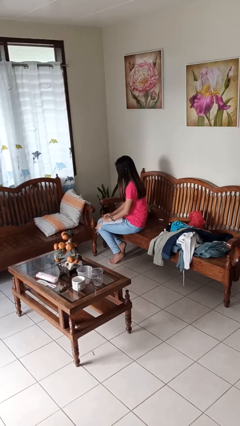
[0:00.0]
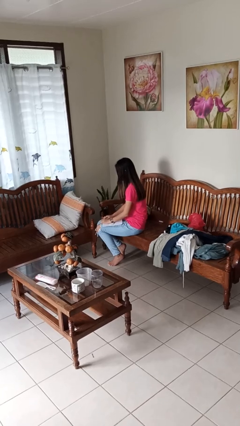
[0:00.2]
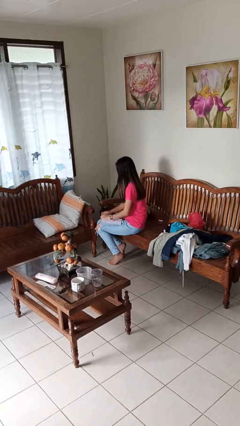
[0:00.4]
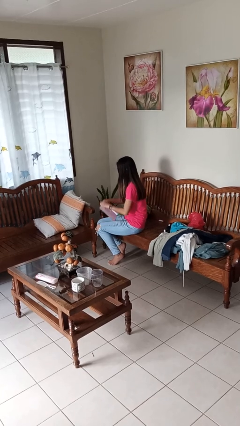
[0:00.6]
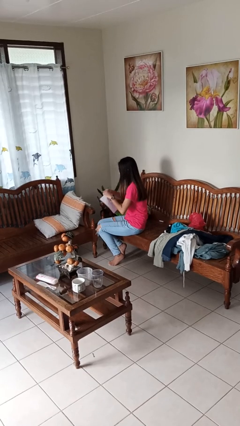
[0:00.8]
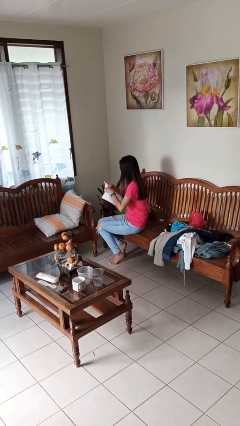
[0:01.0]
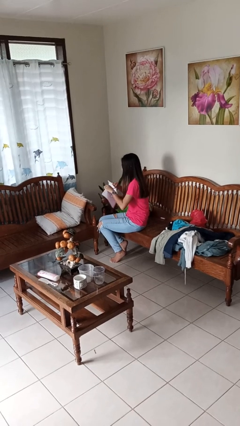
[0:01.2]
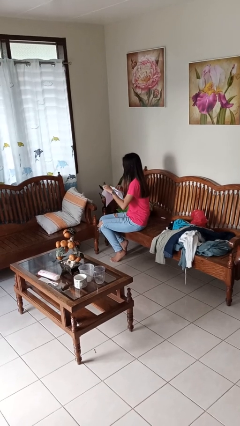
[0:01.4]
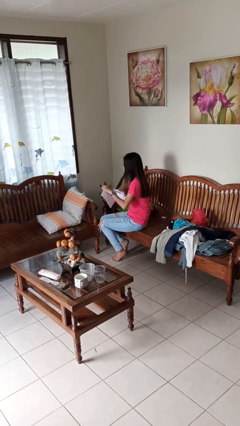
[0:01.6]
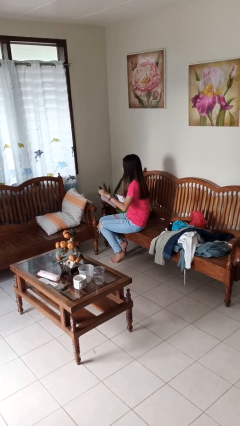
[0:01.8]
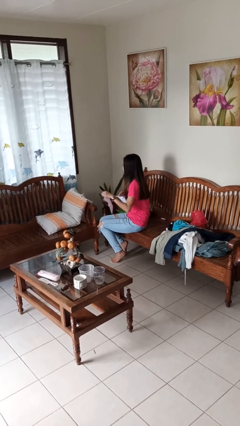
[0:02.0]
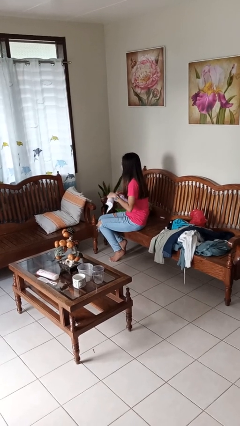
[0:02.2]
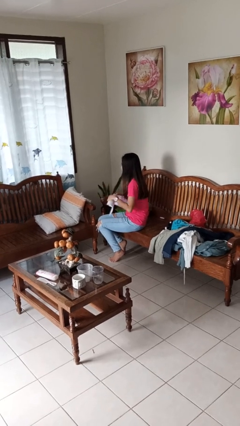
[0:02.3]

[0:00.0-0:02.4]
person tears paper

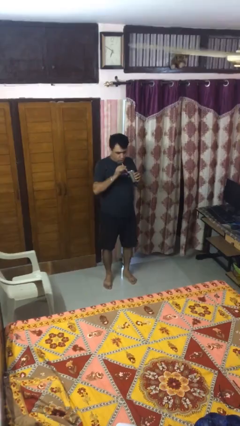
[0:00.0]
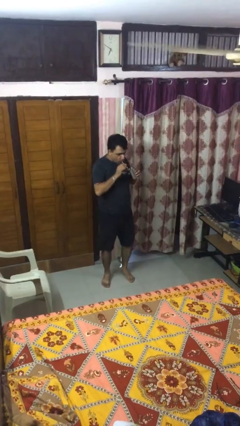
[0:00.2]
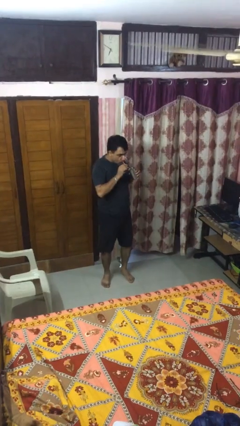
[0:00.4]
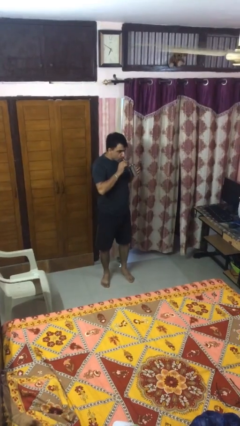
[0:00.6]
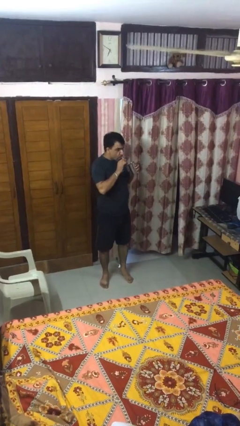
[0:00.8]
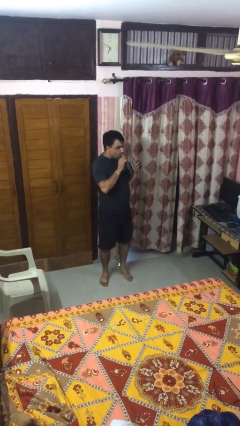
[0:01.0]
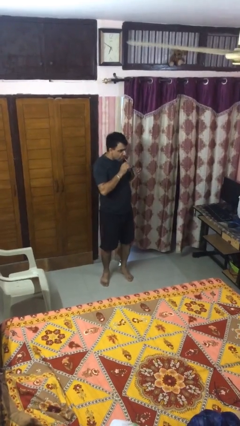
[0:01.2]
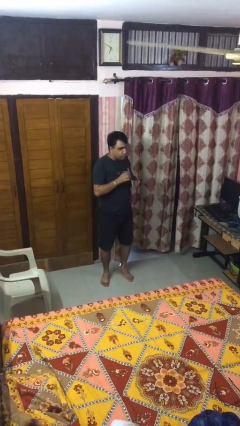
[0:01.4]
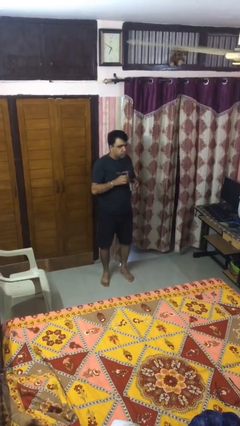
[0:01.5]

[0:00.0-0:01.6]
person drinks from straw

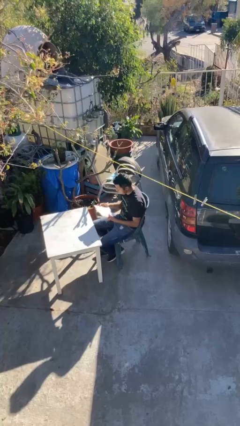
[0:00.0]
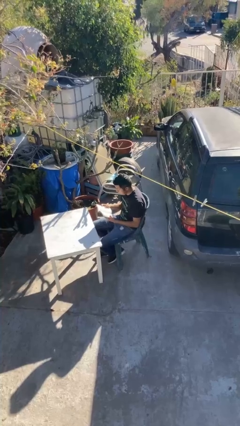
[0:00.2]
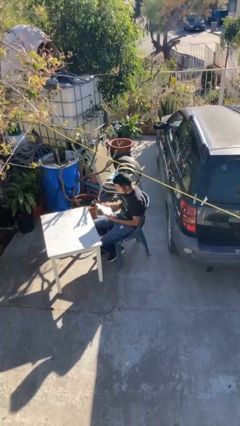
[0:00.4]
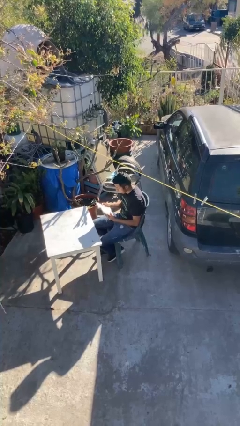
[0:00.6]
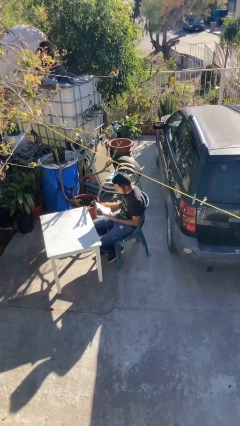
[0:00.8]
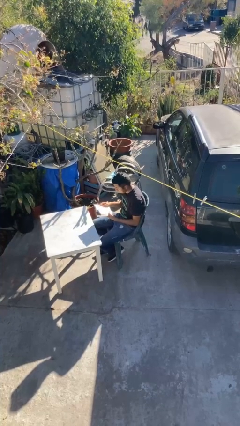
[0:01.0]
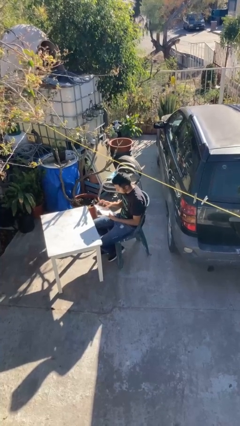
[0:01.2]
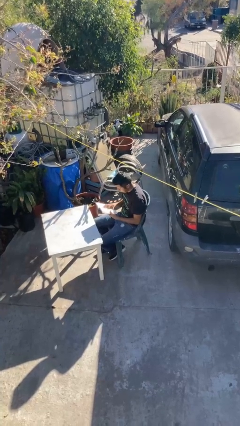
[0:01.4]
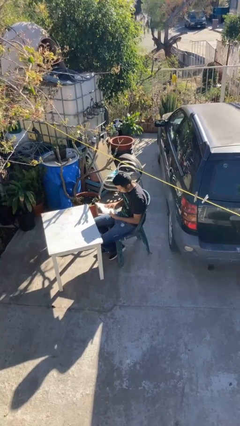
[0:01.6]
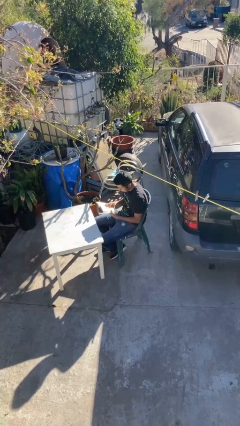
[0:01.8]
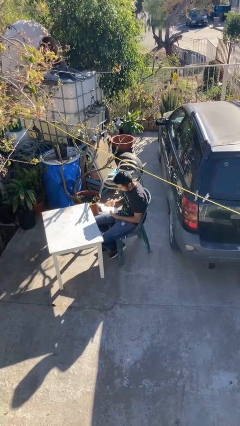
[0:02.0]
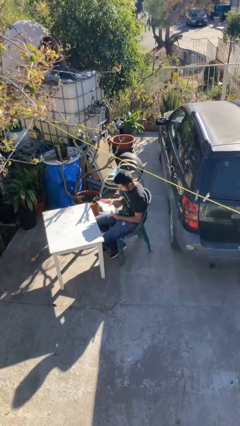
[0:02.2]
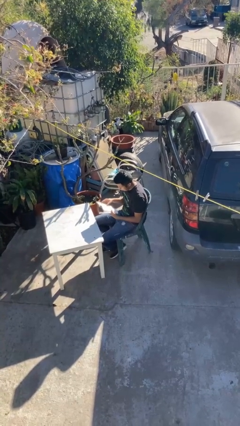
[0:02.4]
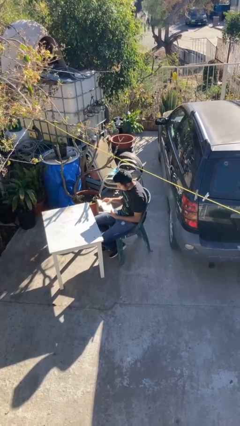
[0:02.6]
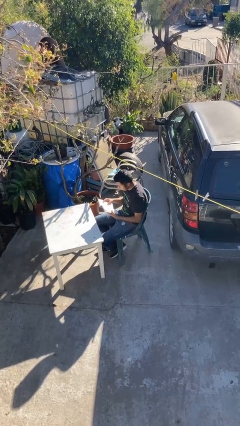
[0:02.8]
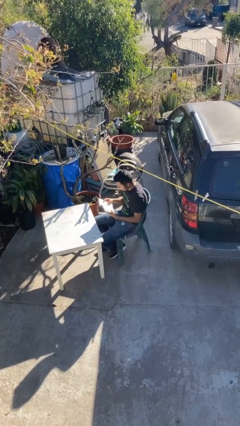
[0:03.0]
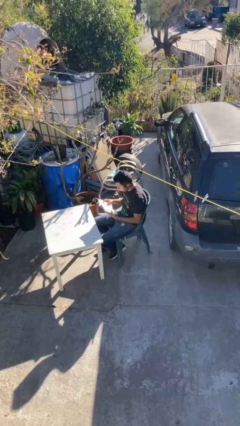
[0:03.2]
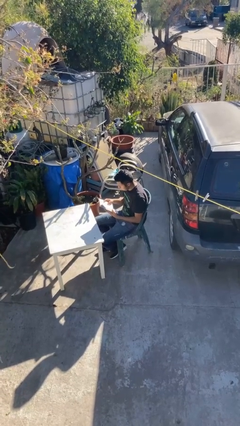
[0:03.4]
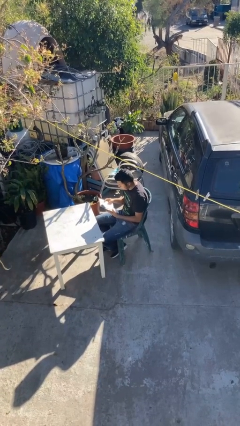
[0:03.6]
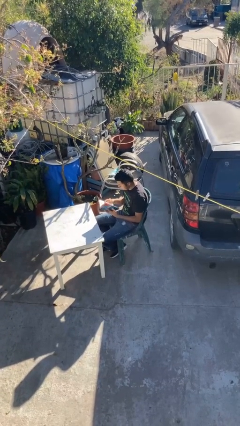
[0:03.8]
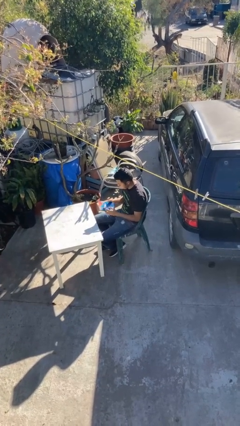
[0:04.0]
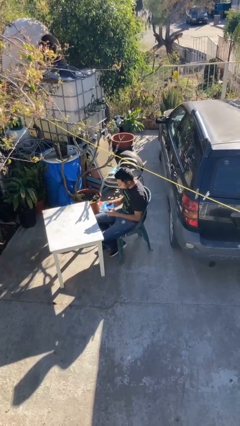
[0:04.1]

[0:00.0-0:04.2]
person reads document

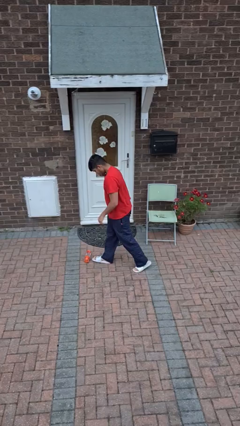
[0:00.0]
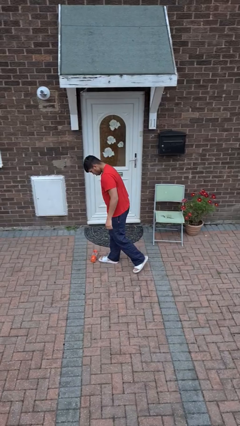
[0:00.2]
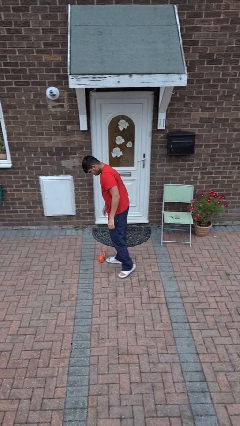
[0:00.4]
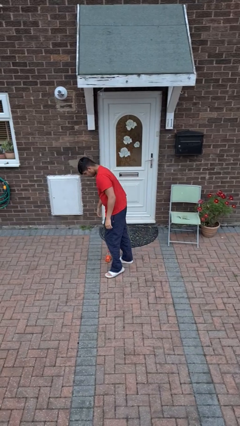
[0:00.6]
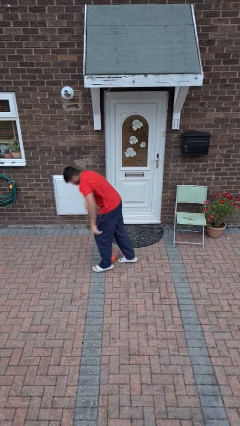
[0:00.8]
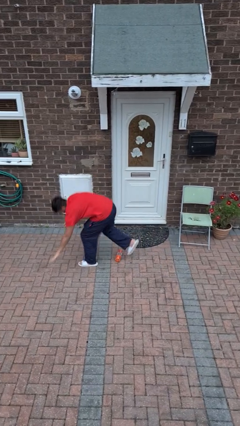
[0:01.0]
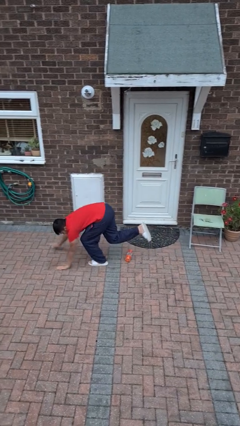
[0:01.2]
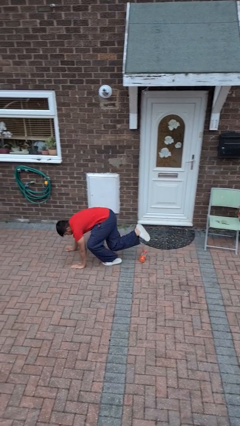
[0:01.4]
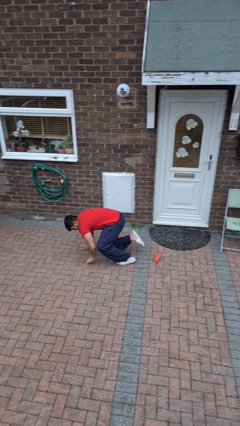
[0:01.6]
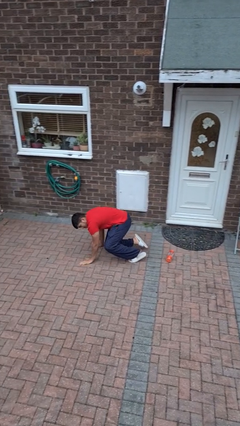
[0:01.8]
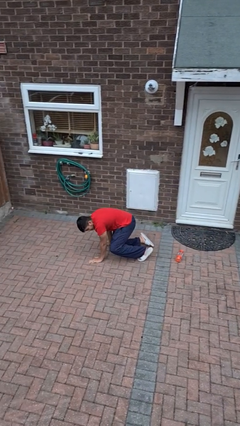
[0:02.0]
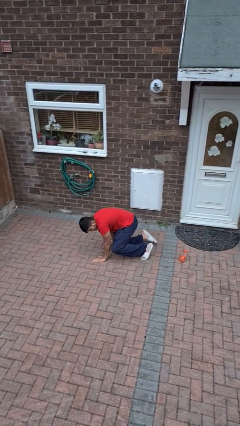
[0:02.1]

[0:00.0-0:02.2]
person trips on object on floor

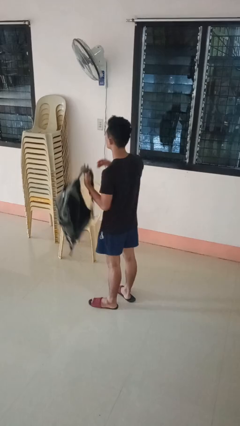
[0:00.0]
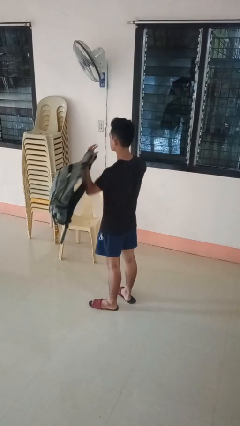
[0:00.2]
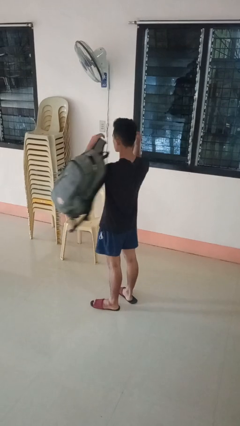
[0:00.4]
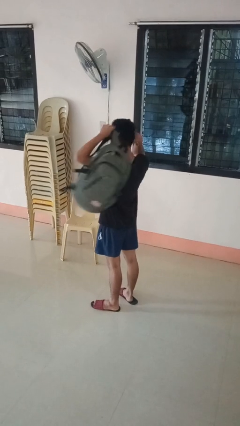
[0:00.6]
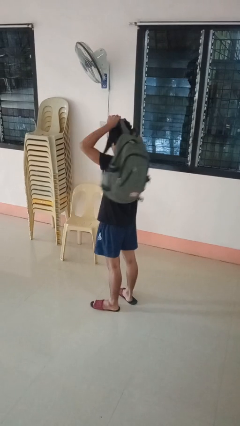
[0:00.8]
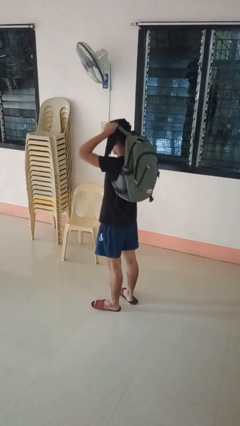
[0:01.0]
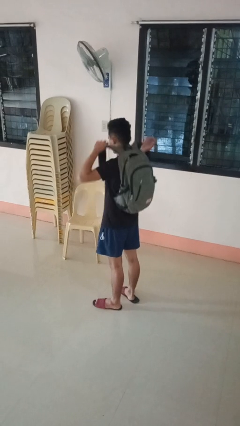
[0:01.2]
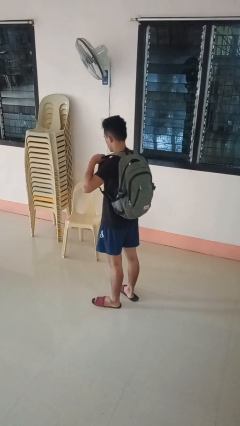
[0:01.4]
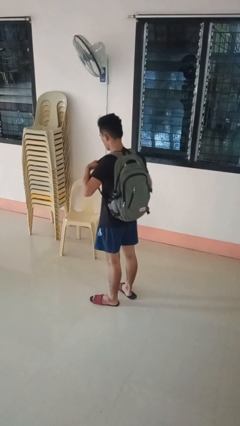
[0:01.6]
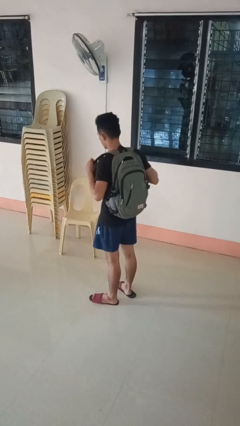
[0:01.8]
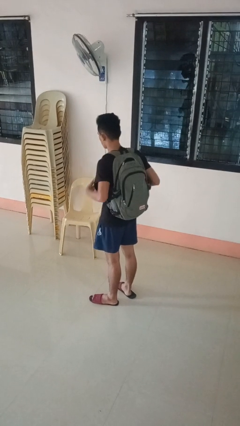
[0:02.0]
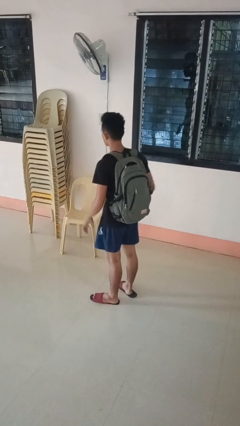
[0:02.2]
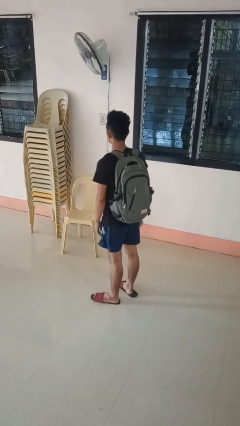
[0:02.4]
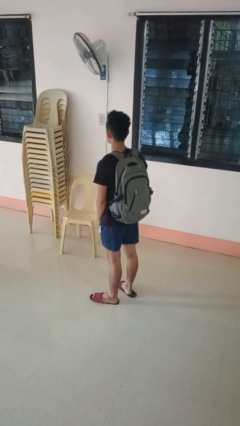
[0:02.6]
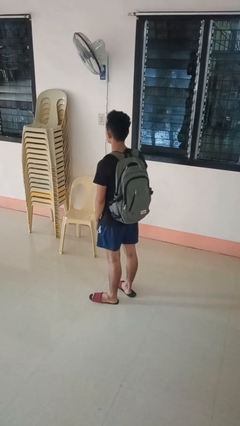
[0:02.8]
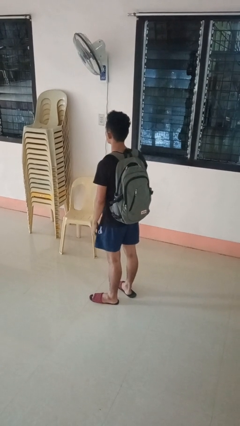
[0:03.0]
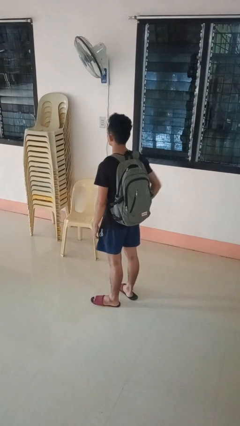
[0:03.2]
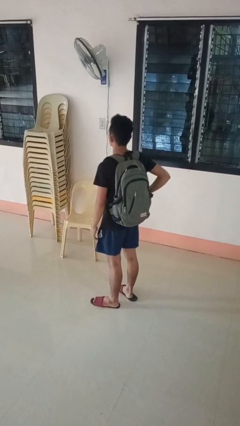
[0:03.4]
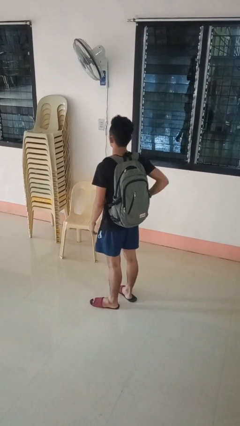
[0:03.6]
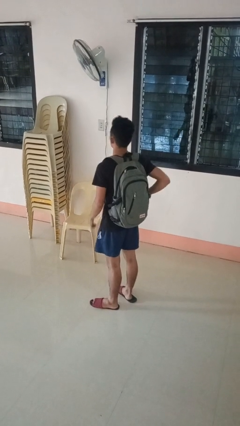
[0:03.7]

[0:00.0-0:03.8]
person puts on backpack

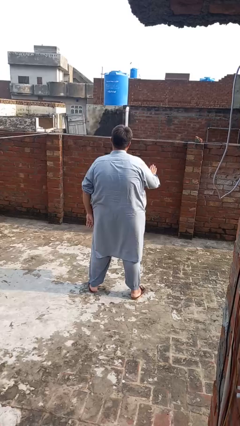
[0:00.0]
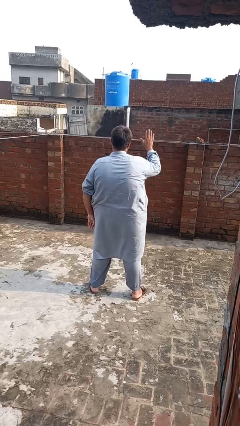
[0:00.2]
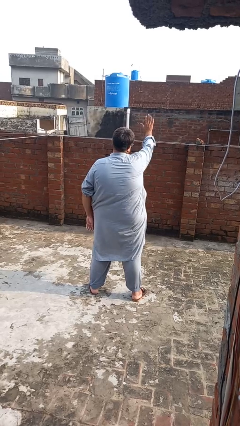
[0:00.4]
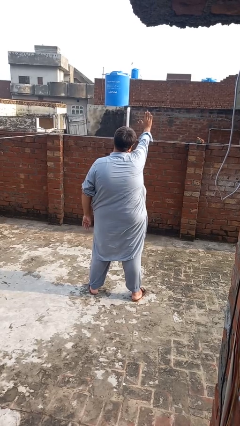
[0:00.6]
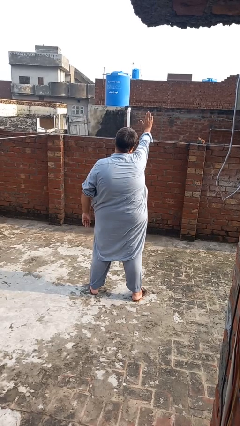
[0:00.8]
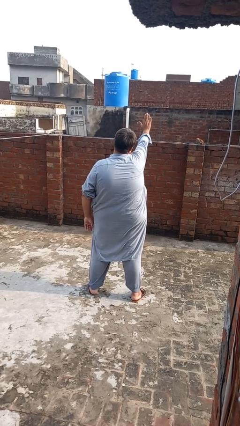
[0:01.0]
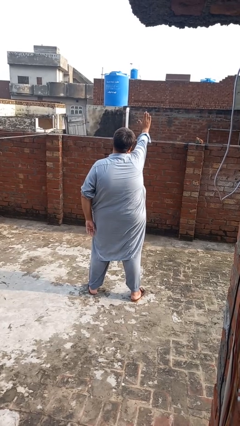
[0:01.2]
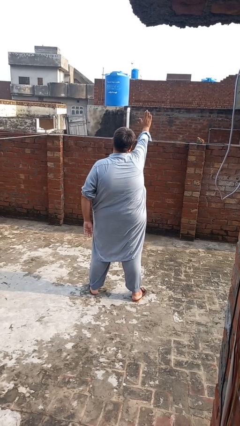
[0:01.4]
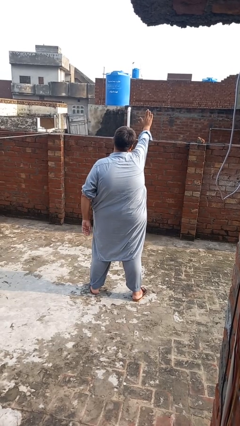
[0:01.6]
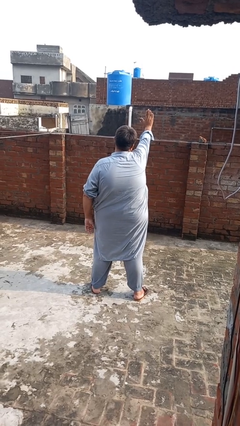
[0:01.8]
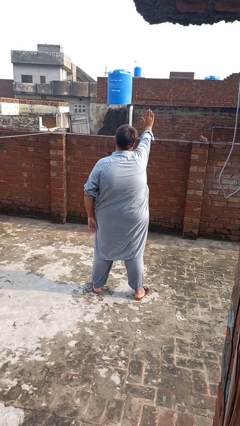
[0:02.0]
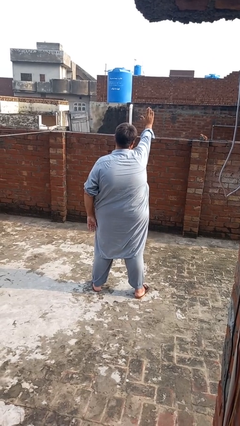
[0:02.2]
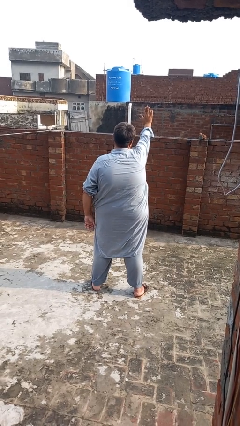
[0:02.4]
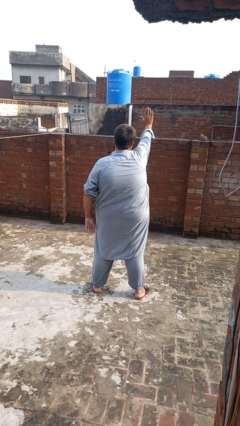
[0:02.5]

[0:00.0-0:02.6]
person gestures stop

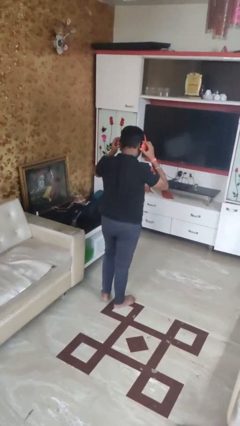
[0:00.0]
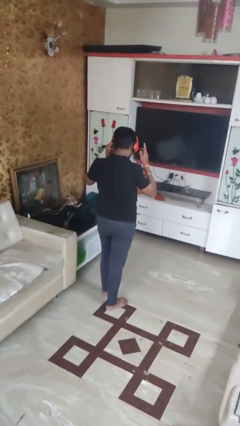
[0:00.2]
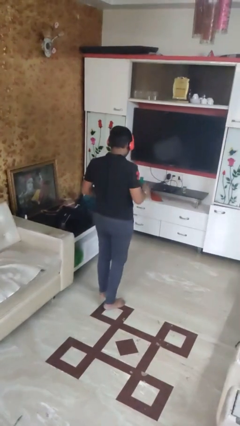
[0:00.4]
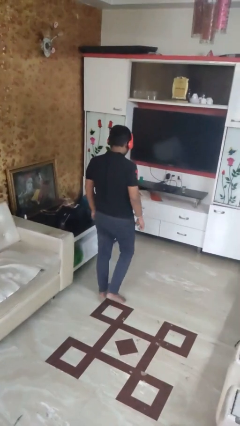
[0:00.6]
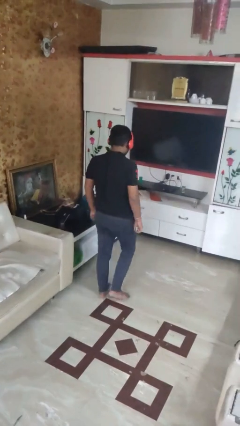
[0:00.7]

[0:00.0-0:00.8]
person puts on headphones
